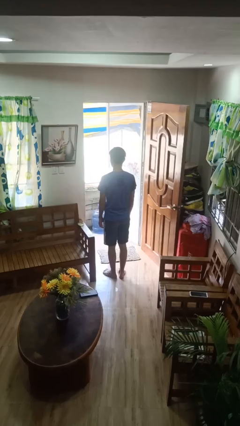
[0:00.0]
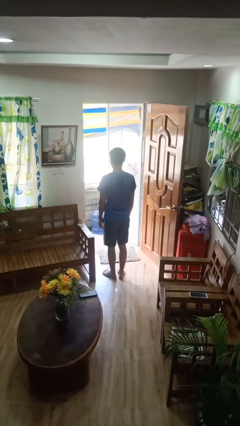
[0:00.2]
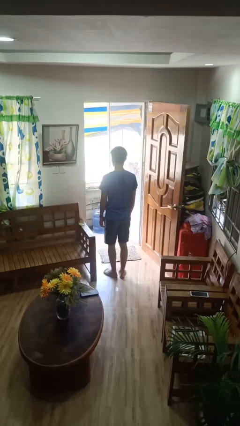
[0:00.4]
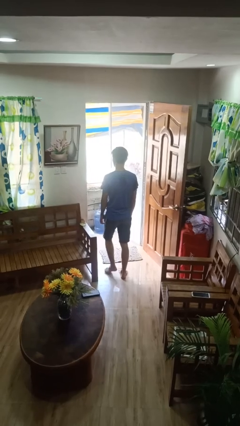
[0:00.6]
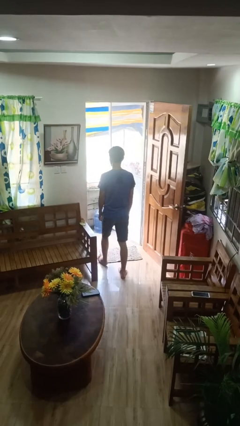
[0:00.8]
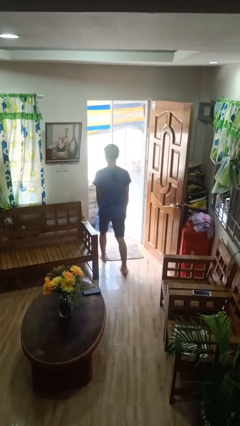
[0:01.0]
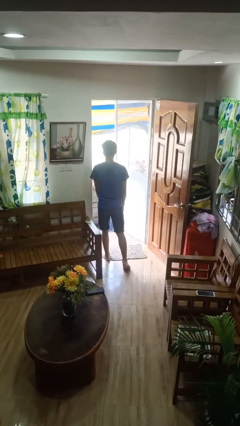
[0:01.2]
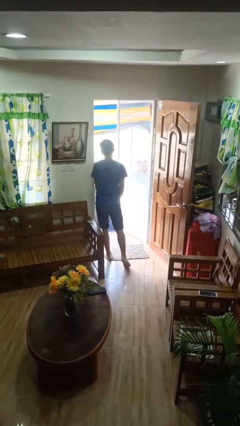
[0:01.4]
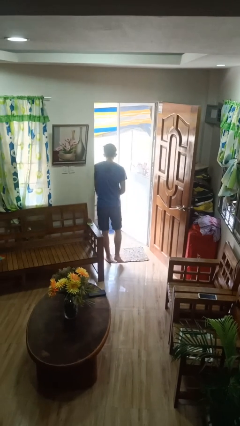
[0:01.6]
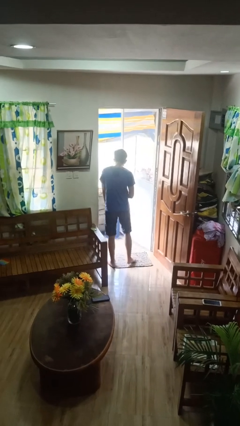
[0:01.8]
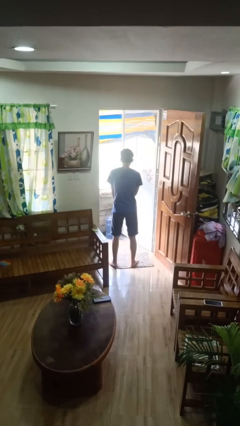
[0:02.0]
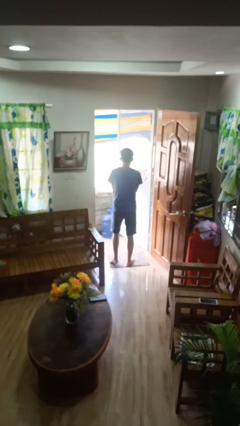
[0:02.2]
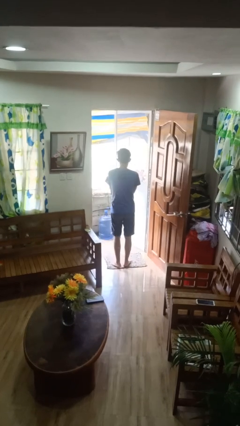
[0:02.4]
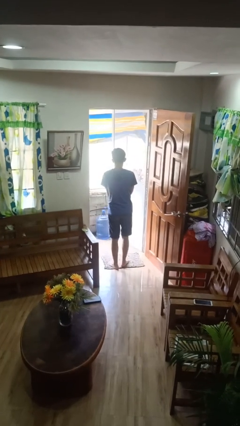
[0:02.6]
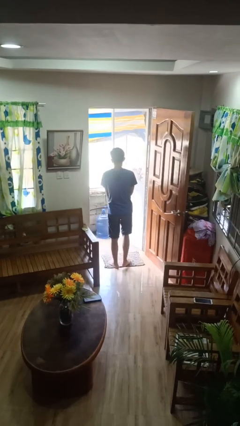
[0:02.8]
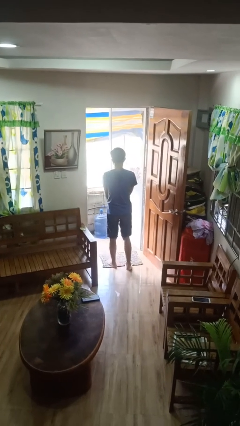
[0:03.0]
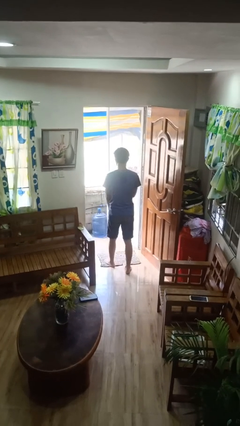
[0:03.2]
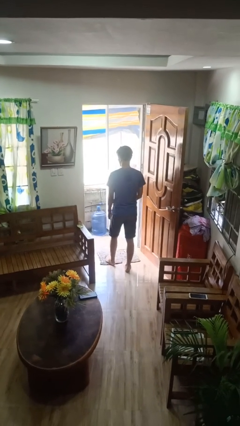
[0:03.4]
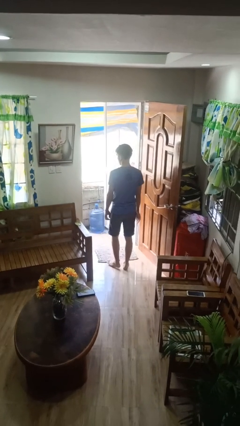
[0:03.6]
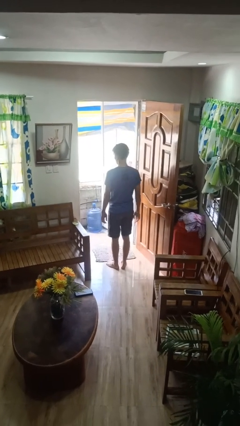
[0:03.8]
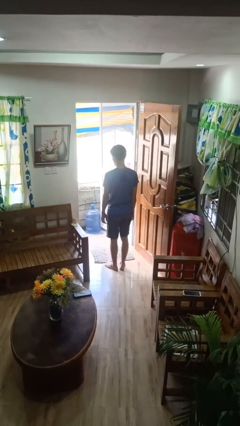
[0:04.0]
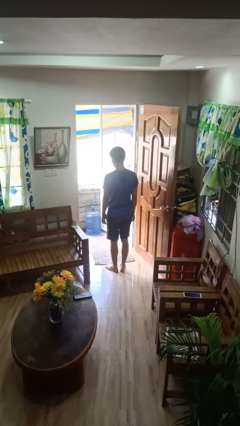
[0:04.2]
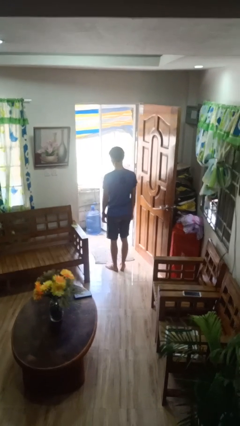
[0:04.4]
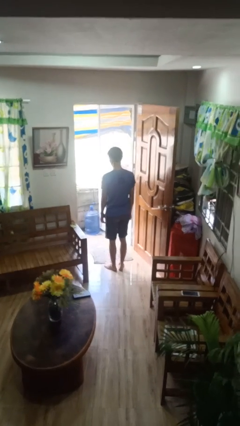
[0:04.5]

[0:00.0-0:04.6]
person bumps into wall

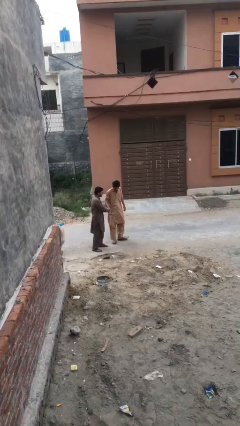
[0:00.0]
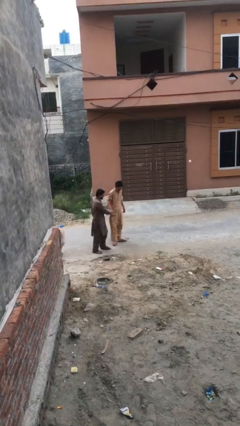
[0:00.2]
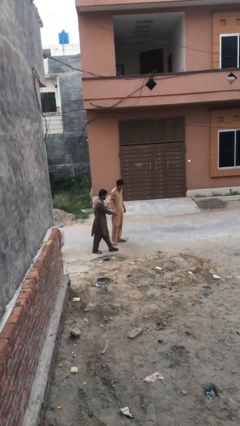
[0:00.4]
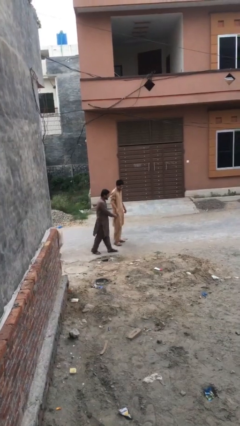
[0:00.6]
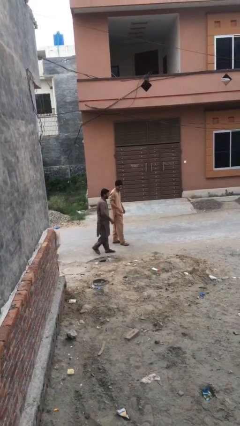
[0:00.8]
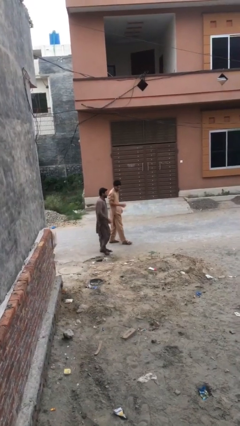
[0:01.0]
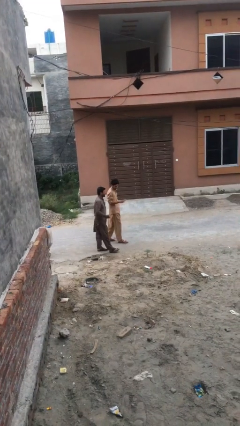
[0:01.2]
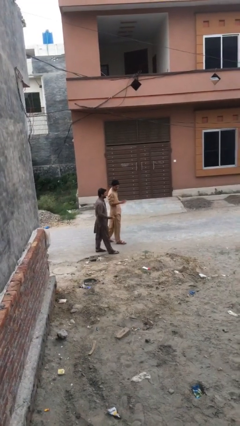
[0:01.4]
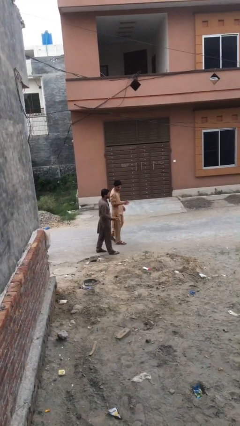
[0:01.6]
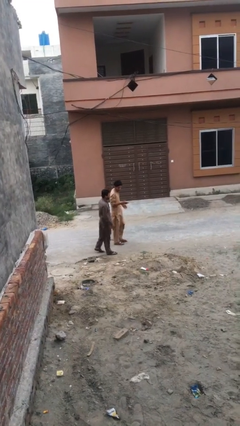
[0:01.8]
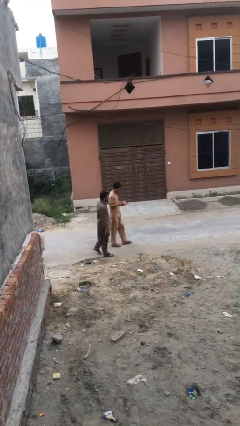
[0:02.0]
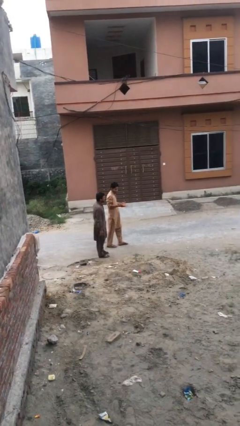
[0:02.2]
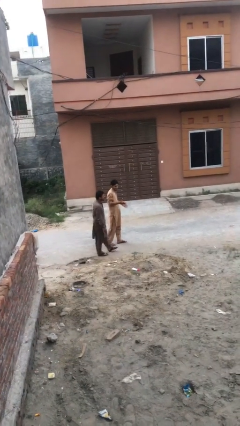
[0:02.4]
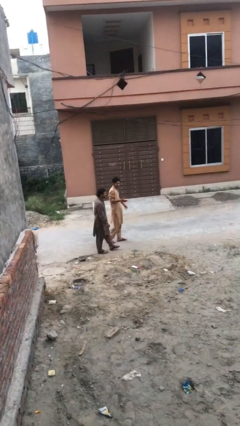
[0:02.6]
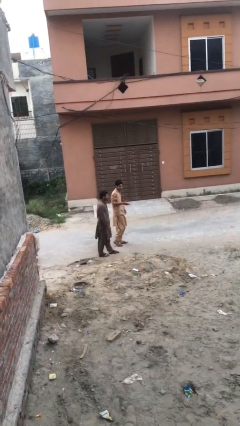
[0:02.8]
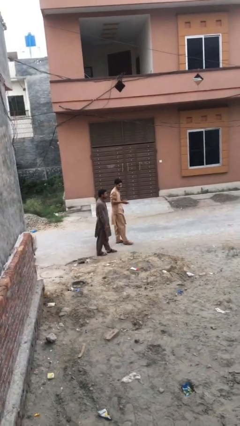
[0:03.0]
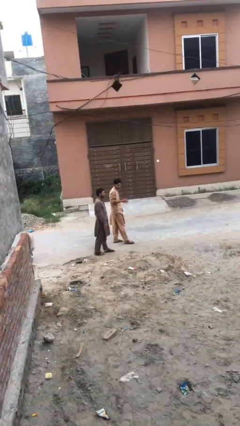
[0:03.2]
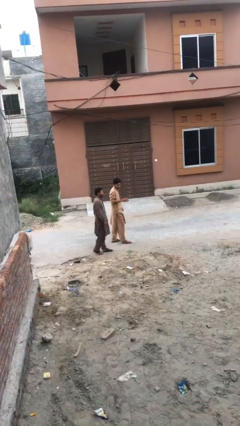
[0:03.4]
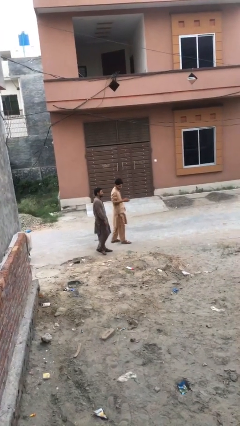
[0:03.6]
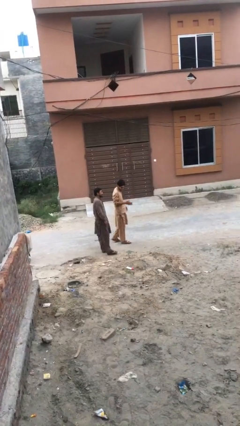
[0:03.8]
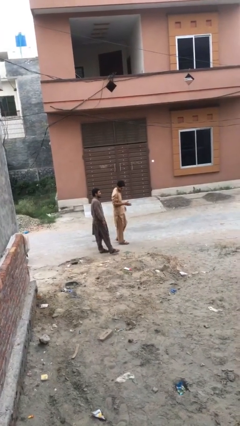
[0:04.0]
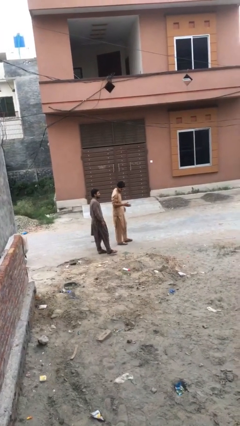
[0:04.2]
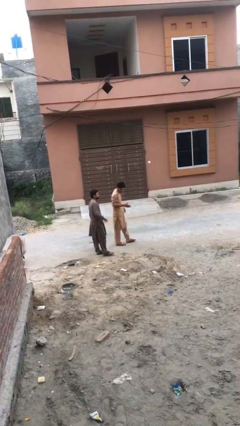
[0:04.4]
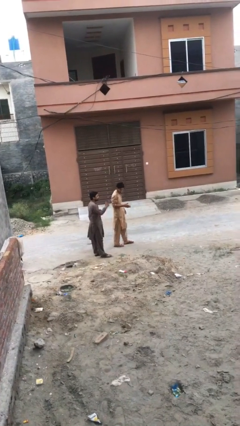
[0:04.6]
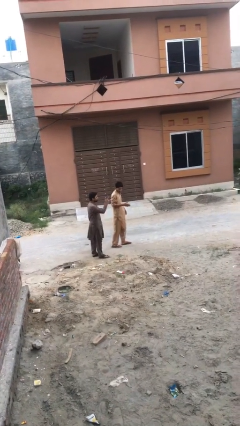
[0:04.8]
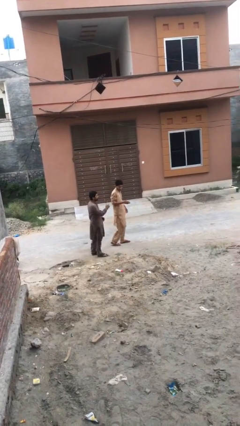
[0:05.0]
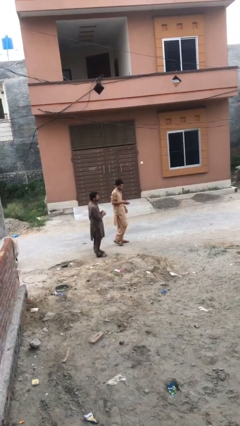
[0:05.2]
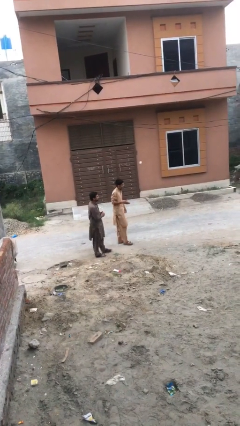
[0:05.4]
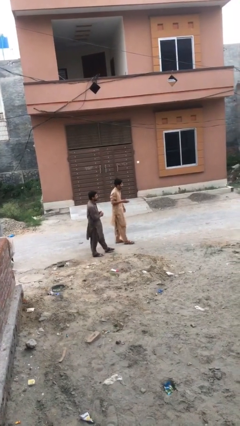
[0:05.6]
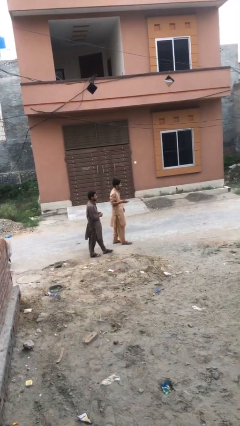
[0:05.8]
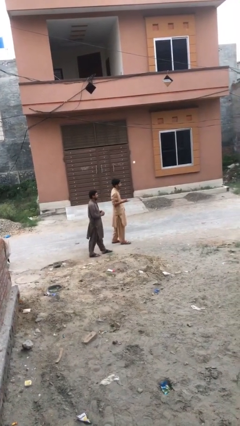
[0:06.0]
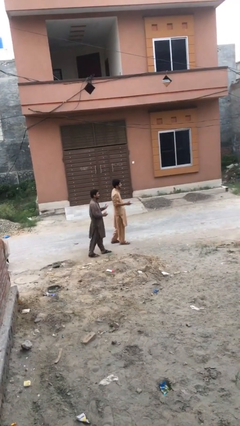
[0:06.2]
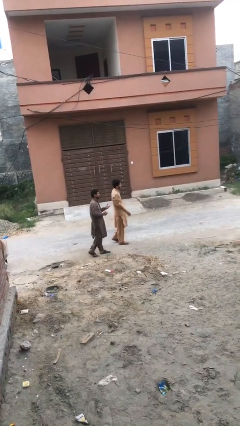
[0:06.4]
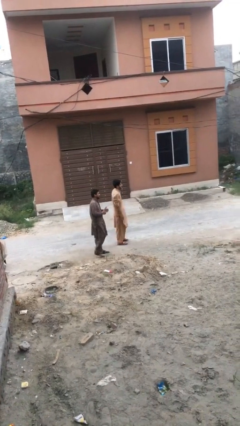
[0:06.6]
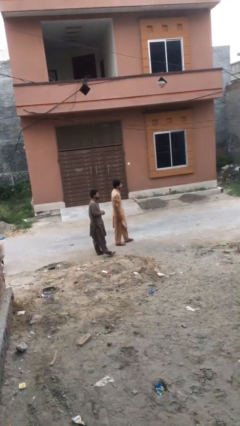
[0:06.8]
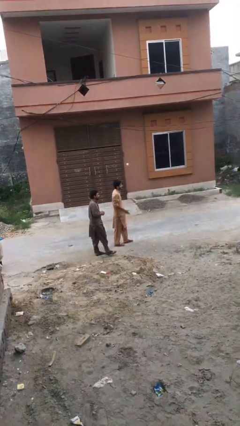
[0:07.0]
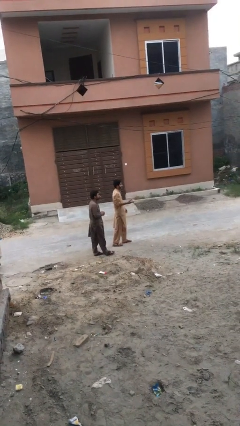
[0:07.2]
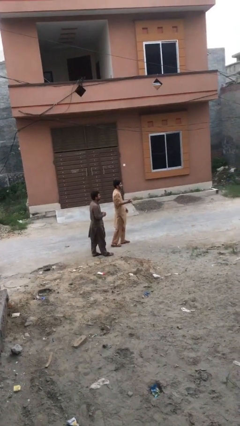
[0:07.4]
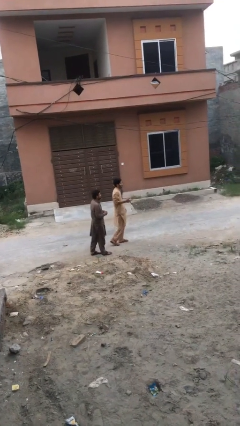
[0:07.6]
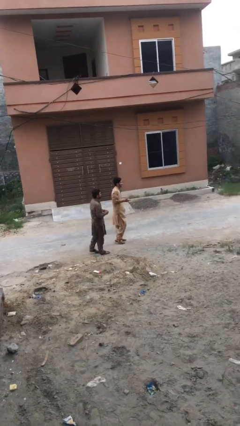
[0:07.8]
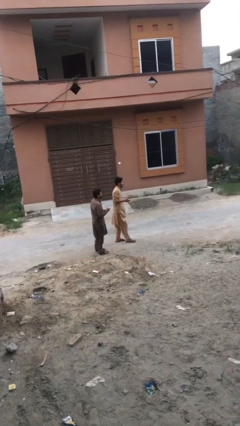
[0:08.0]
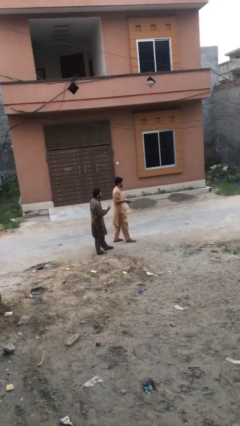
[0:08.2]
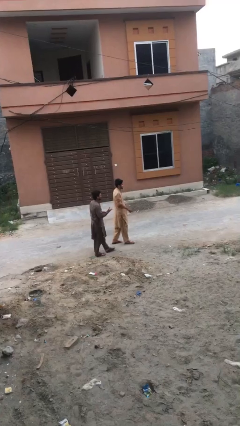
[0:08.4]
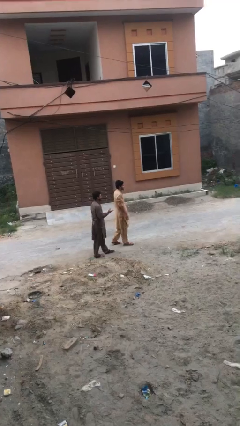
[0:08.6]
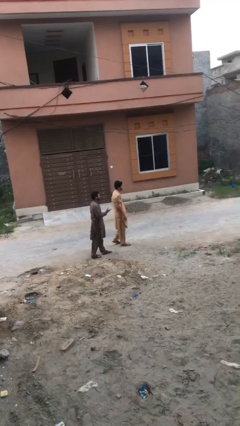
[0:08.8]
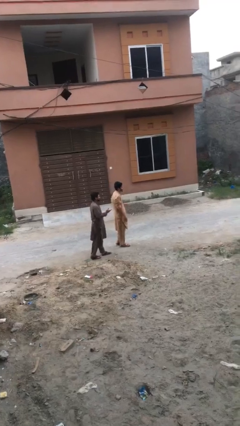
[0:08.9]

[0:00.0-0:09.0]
person talks to person

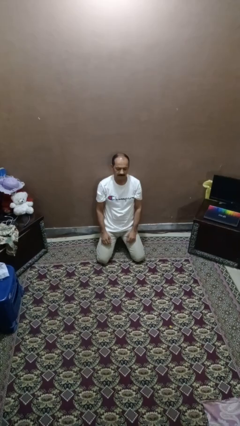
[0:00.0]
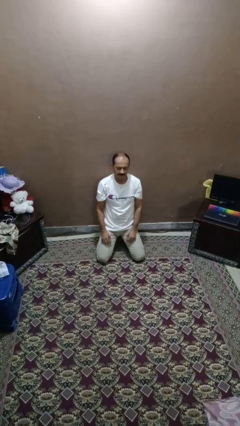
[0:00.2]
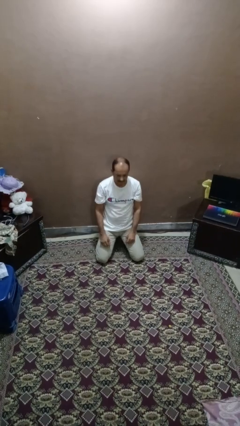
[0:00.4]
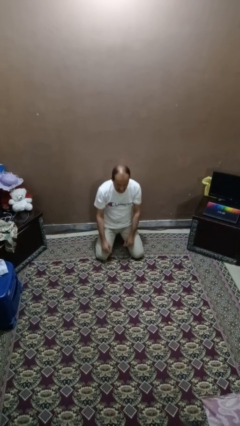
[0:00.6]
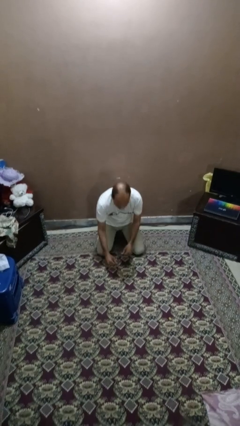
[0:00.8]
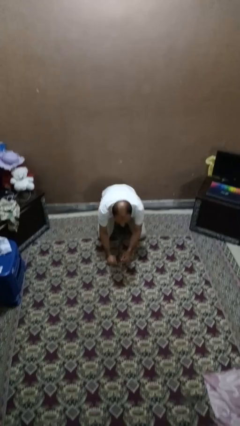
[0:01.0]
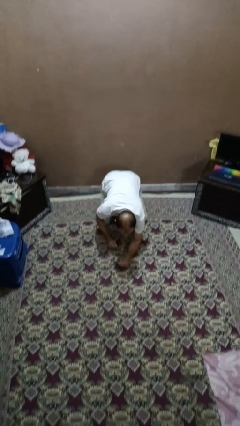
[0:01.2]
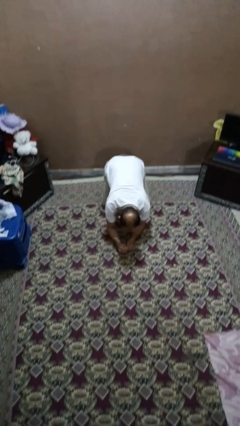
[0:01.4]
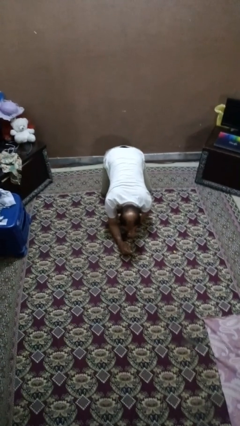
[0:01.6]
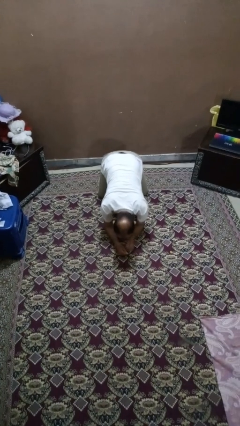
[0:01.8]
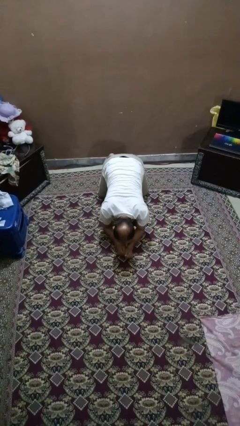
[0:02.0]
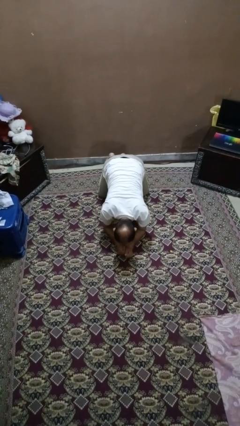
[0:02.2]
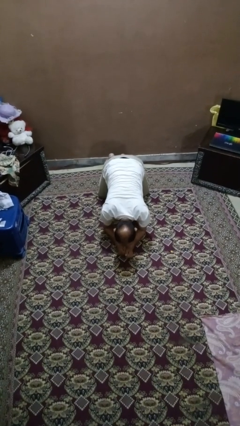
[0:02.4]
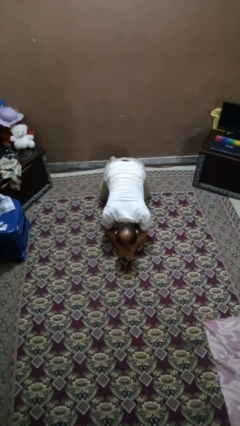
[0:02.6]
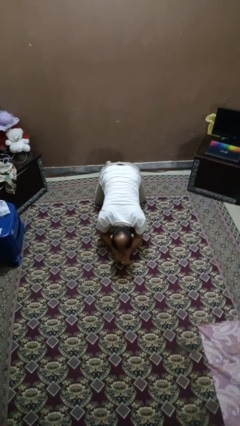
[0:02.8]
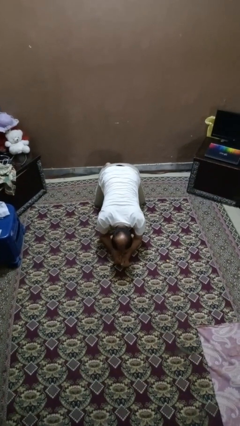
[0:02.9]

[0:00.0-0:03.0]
person crawls

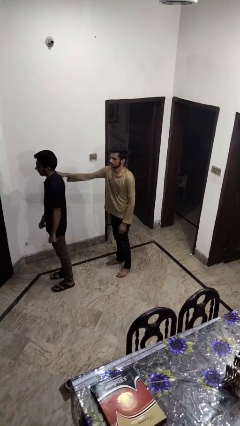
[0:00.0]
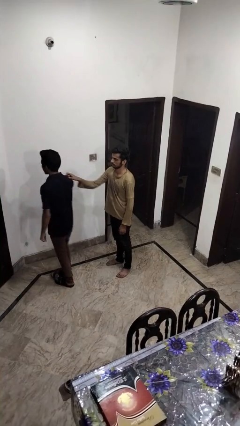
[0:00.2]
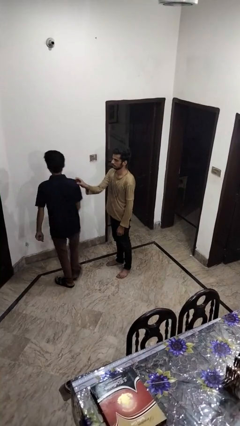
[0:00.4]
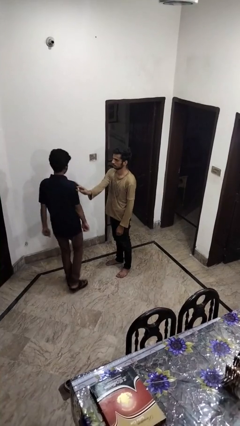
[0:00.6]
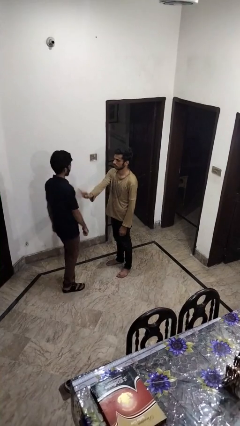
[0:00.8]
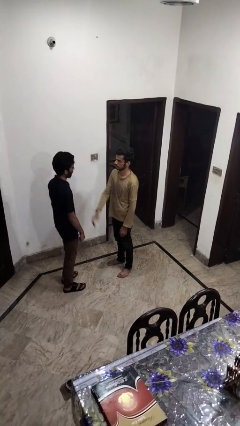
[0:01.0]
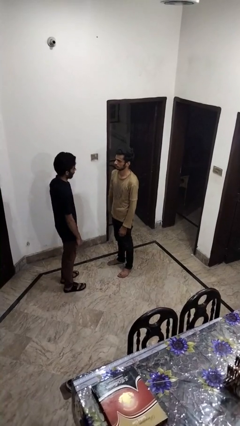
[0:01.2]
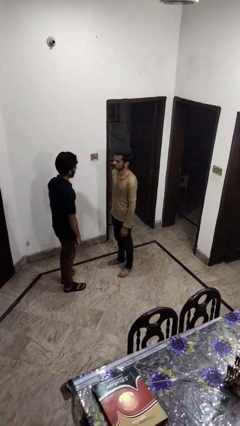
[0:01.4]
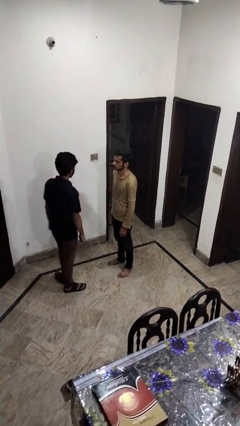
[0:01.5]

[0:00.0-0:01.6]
person spins person around
